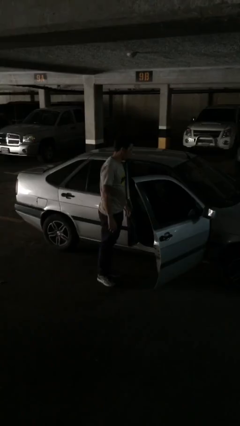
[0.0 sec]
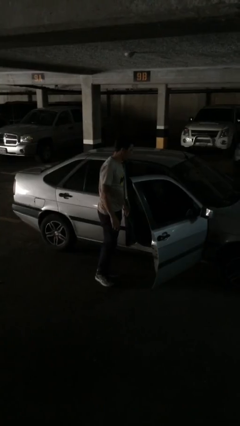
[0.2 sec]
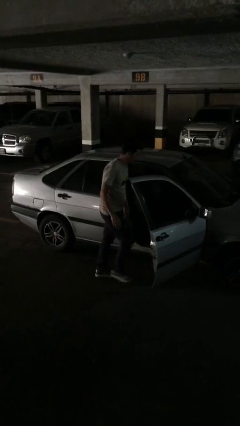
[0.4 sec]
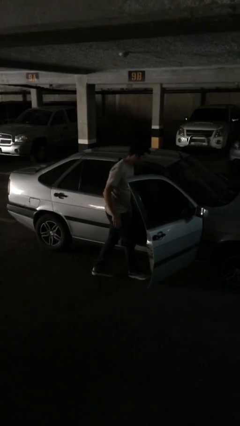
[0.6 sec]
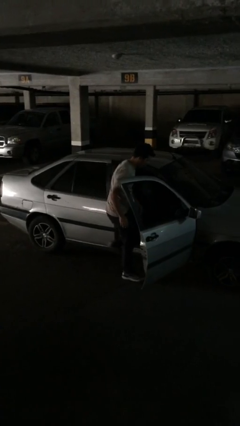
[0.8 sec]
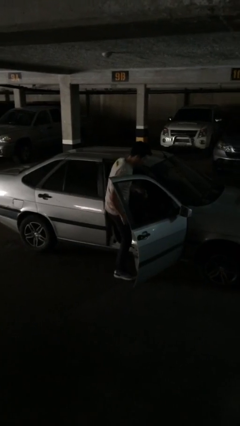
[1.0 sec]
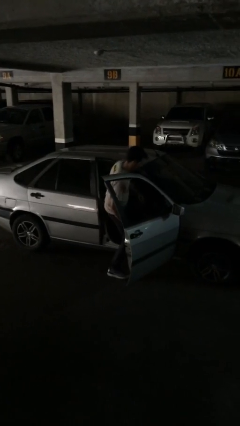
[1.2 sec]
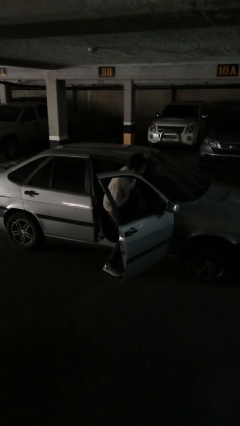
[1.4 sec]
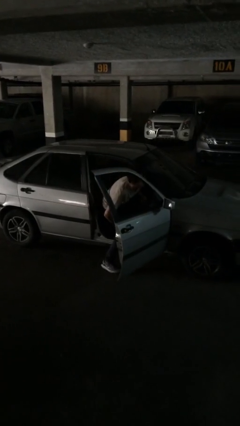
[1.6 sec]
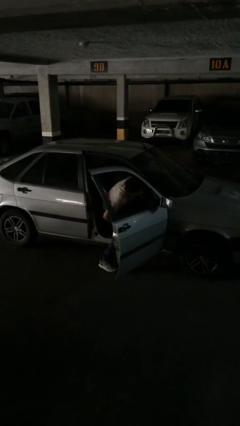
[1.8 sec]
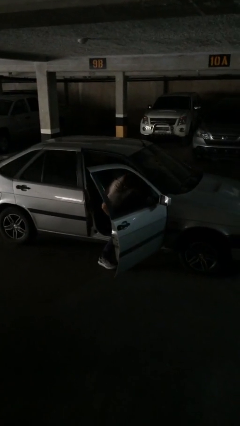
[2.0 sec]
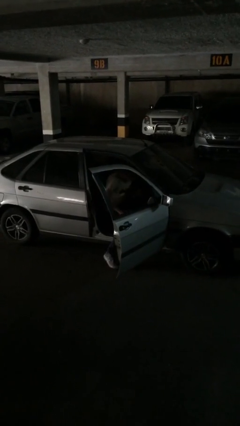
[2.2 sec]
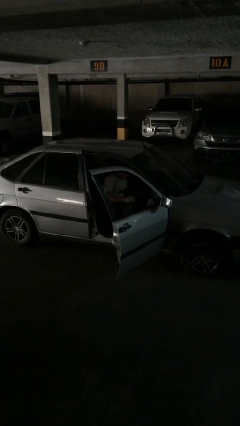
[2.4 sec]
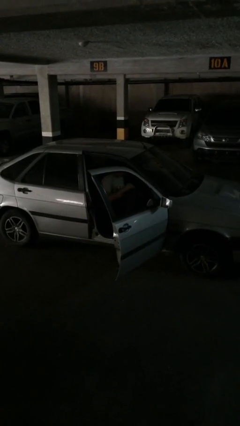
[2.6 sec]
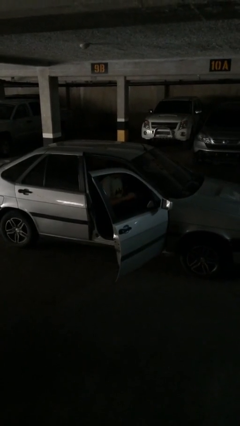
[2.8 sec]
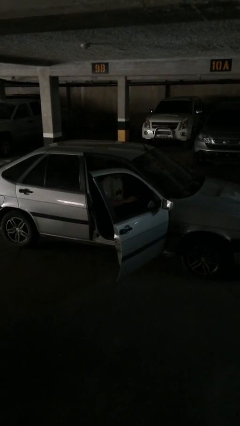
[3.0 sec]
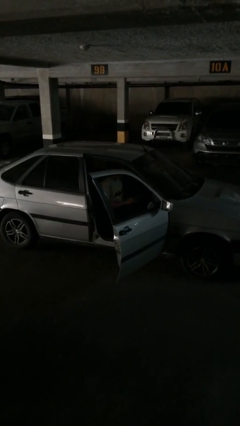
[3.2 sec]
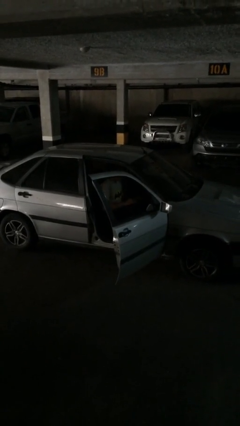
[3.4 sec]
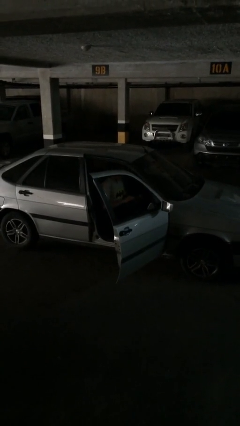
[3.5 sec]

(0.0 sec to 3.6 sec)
person enters car

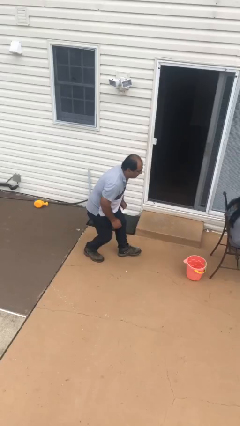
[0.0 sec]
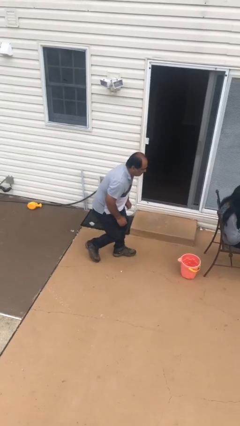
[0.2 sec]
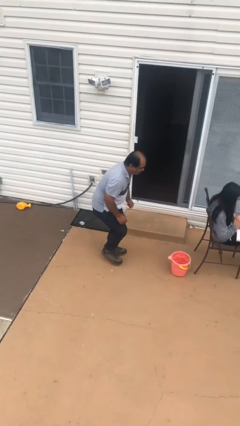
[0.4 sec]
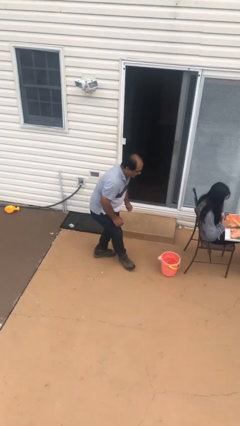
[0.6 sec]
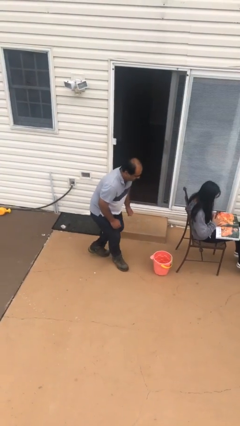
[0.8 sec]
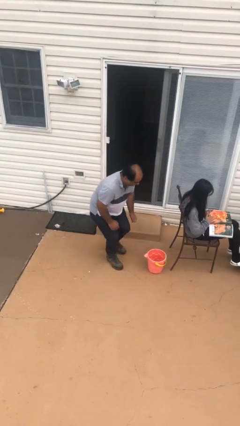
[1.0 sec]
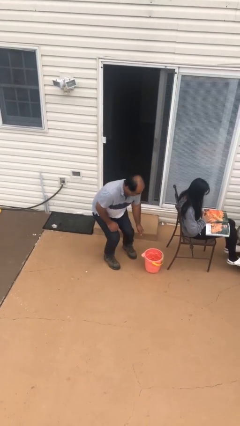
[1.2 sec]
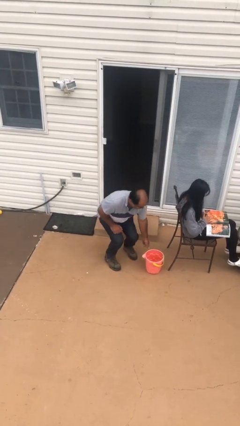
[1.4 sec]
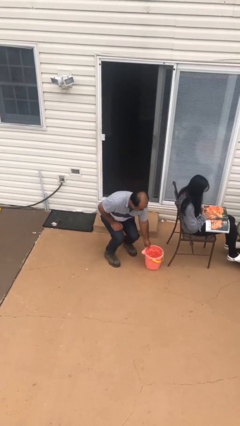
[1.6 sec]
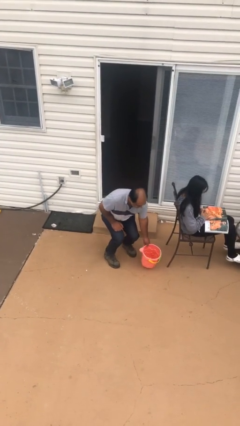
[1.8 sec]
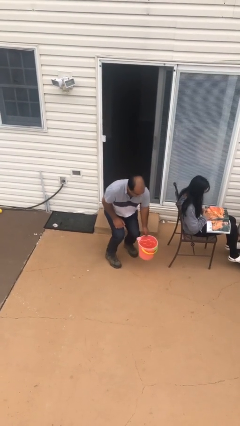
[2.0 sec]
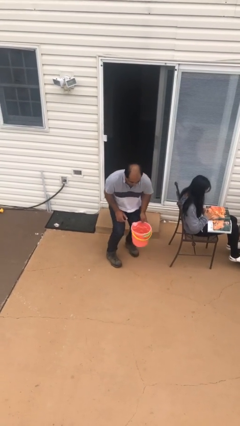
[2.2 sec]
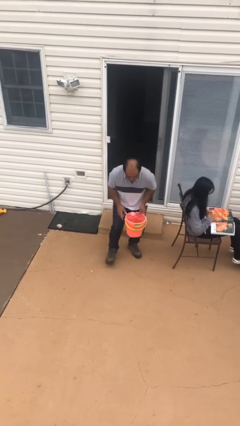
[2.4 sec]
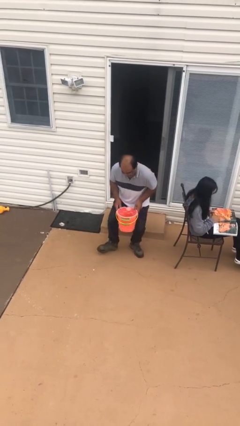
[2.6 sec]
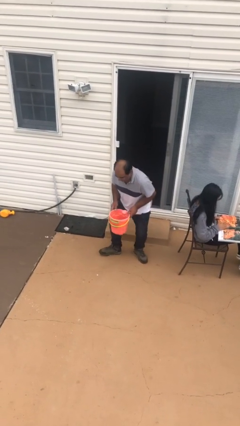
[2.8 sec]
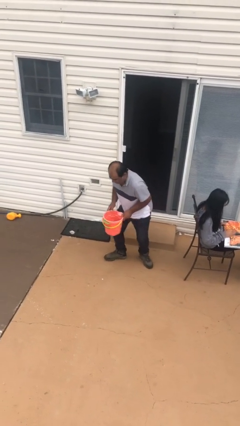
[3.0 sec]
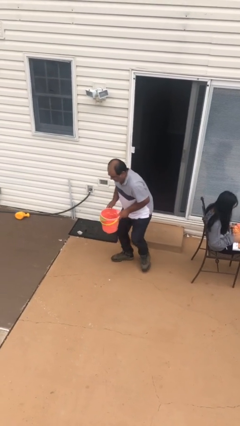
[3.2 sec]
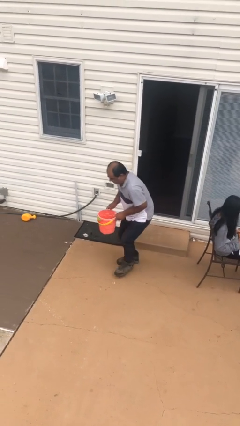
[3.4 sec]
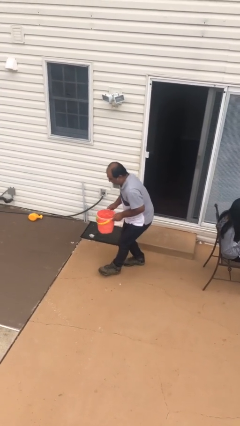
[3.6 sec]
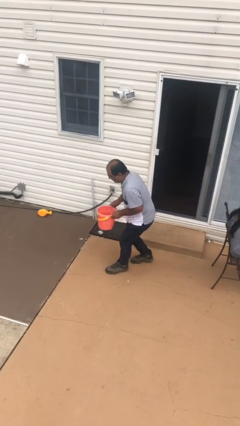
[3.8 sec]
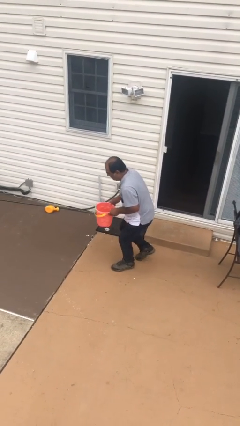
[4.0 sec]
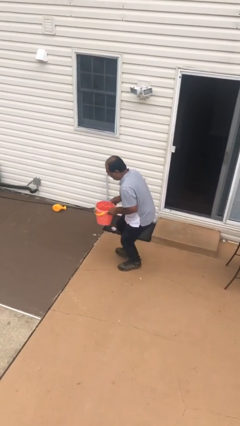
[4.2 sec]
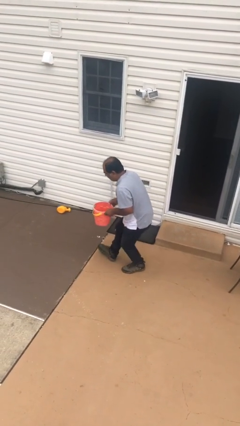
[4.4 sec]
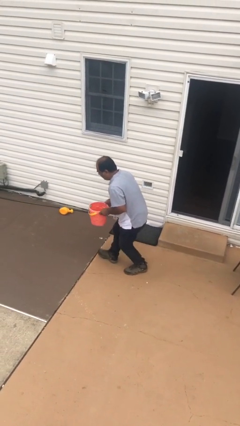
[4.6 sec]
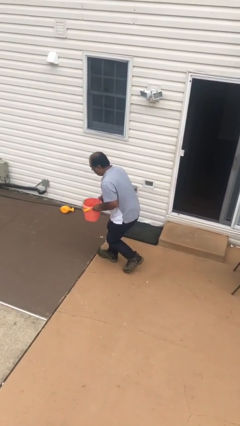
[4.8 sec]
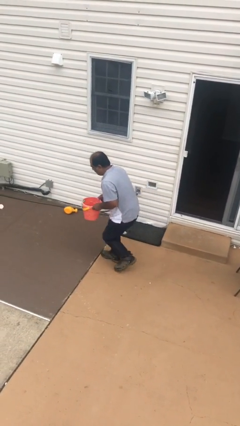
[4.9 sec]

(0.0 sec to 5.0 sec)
person steals object from person

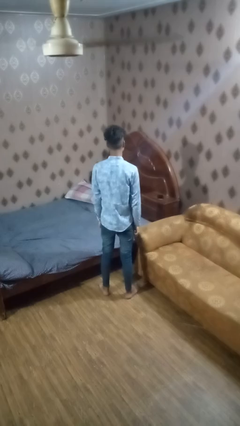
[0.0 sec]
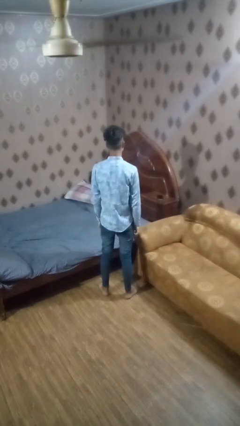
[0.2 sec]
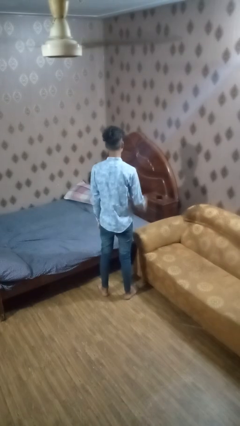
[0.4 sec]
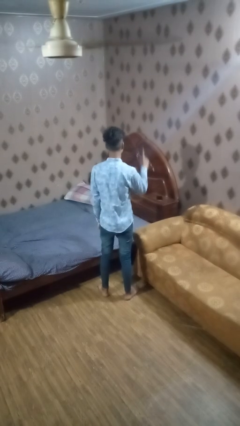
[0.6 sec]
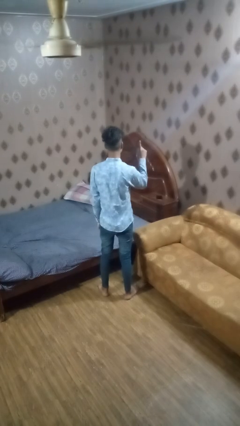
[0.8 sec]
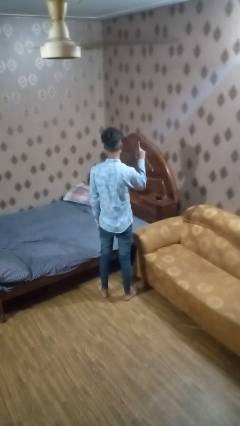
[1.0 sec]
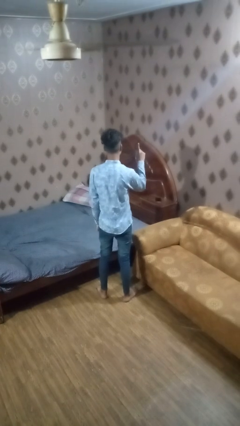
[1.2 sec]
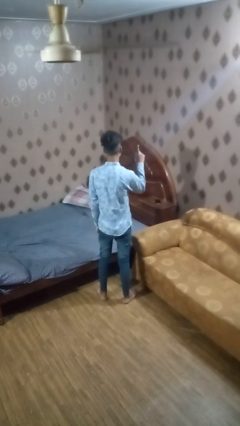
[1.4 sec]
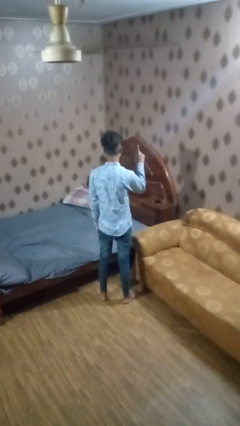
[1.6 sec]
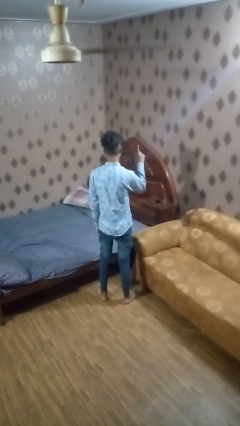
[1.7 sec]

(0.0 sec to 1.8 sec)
person gestures number one

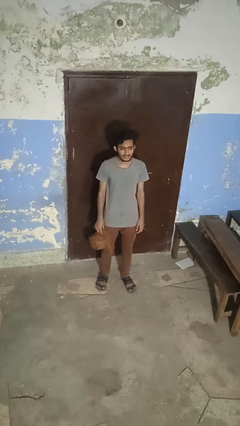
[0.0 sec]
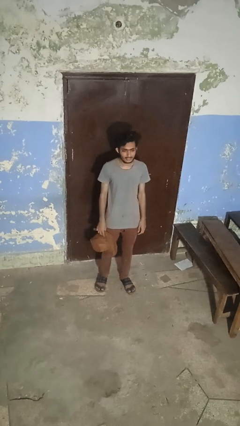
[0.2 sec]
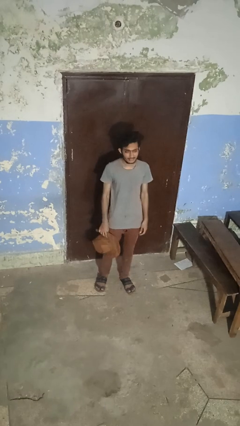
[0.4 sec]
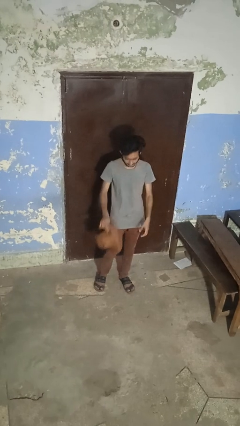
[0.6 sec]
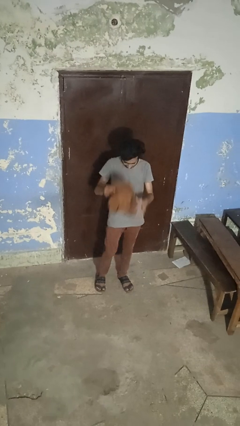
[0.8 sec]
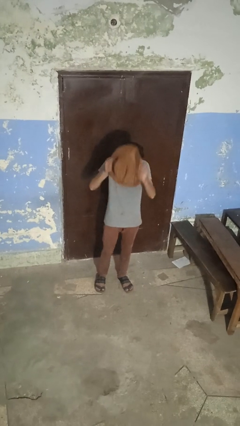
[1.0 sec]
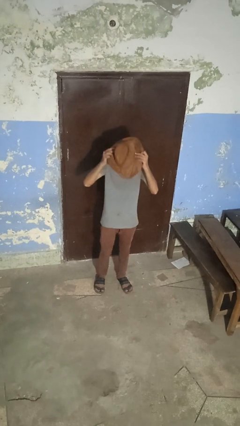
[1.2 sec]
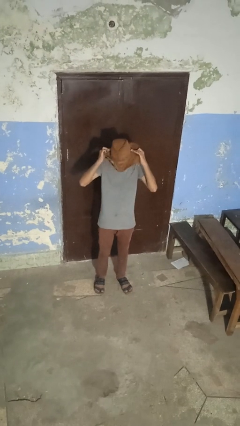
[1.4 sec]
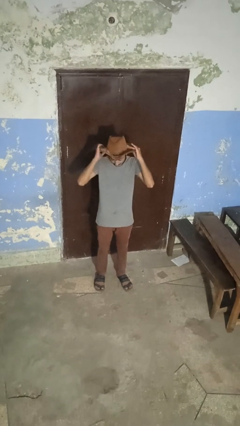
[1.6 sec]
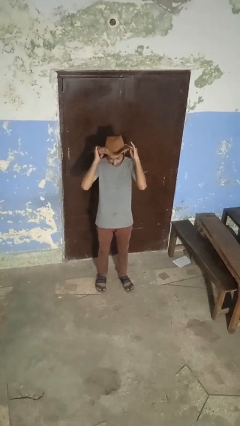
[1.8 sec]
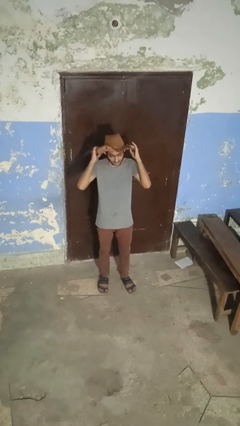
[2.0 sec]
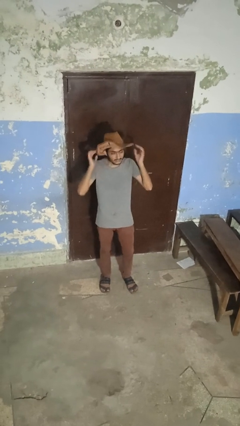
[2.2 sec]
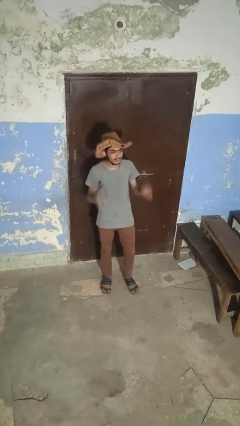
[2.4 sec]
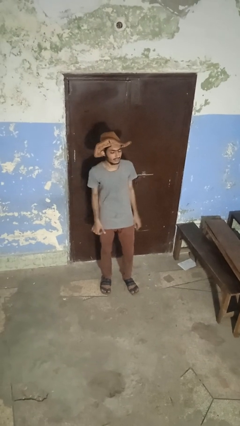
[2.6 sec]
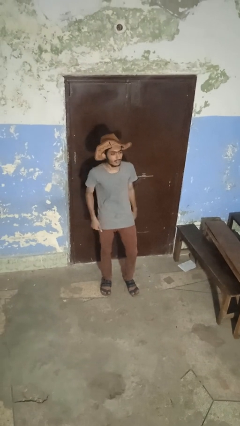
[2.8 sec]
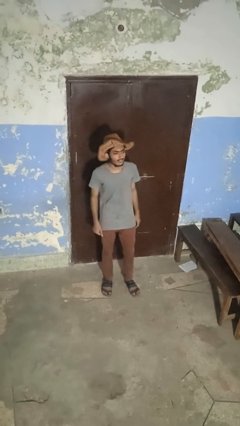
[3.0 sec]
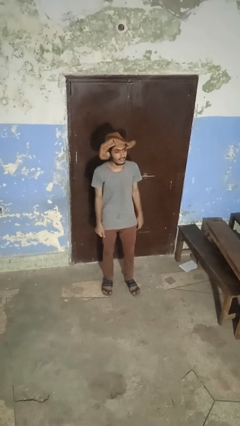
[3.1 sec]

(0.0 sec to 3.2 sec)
person puts on hat

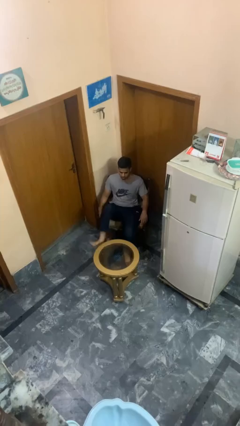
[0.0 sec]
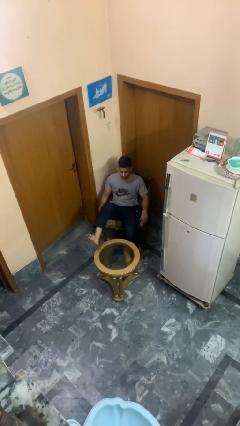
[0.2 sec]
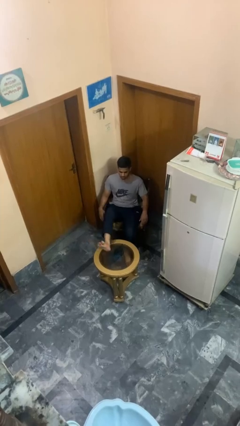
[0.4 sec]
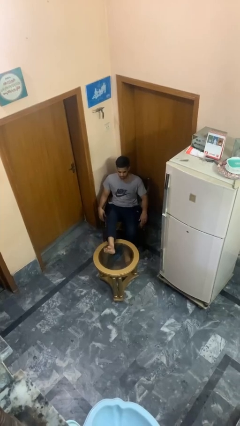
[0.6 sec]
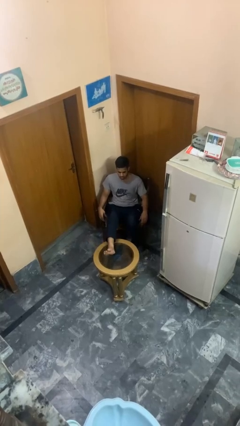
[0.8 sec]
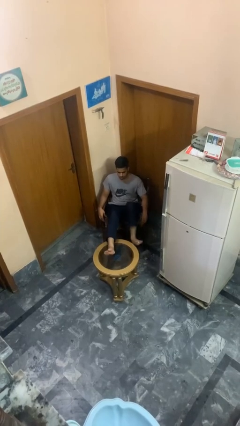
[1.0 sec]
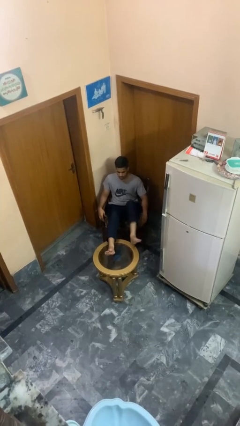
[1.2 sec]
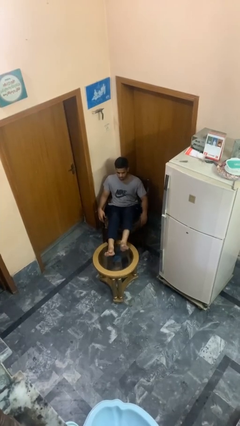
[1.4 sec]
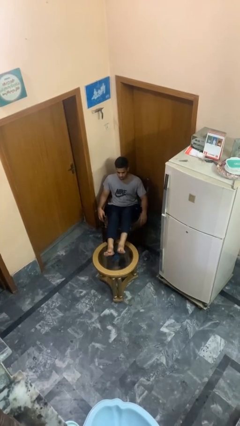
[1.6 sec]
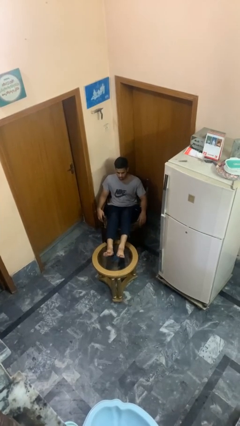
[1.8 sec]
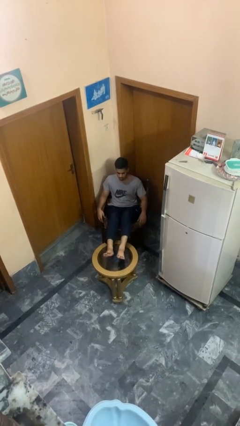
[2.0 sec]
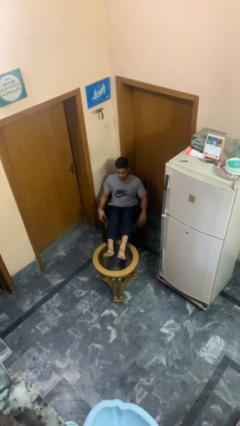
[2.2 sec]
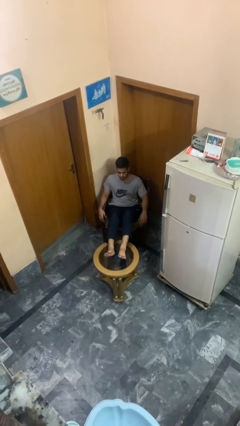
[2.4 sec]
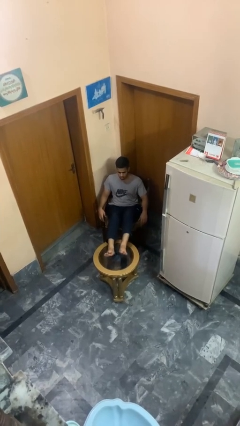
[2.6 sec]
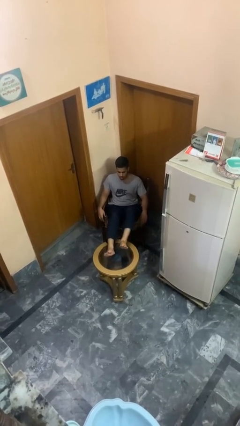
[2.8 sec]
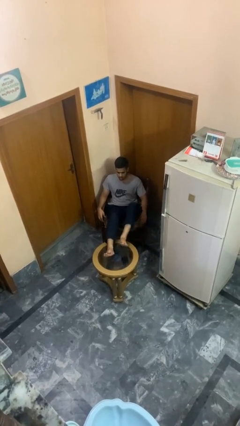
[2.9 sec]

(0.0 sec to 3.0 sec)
person puts feet up

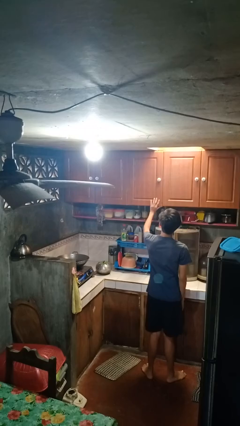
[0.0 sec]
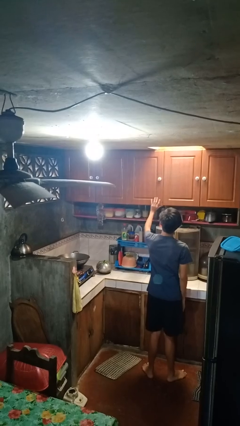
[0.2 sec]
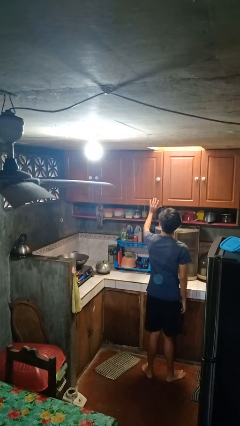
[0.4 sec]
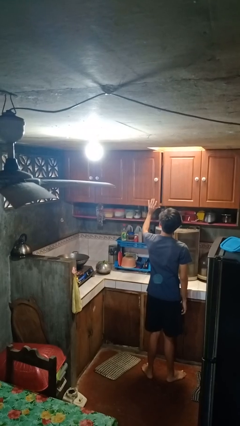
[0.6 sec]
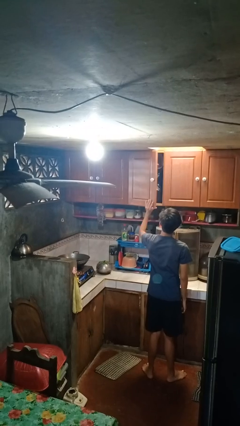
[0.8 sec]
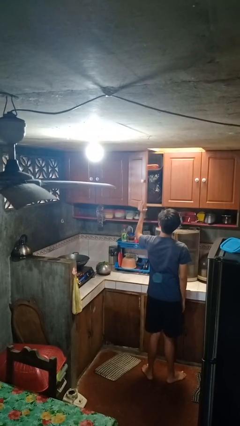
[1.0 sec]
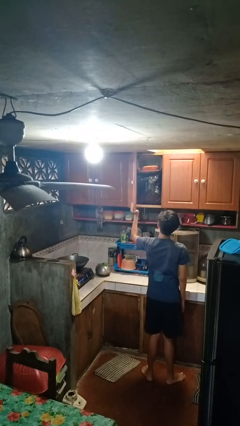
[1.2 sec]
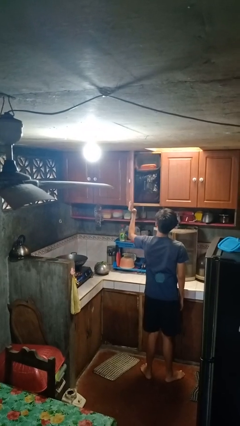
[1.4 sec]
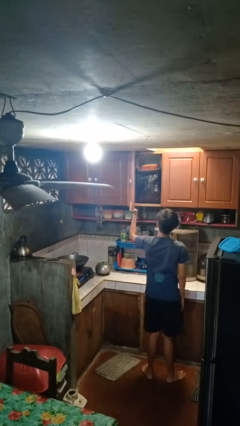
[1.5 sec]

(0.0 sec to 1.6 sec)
person opens cabinet
